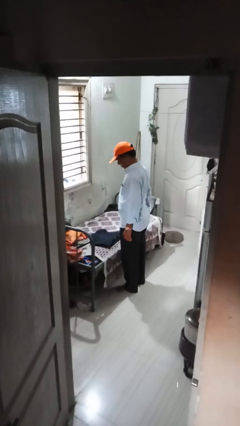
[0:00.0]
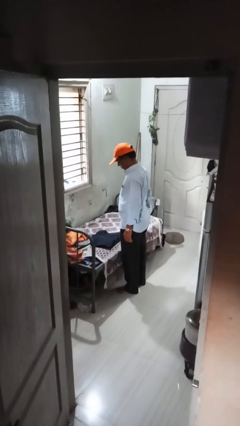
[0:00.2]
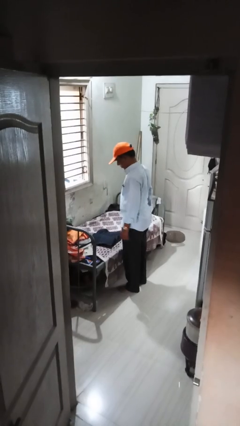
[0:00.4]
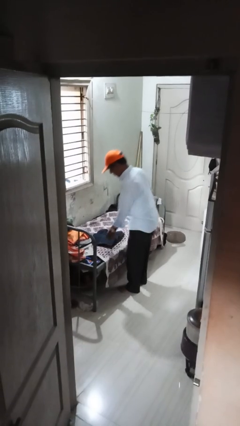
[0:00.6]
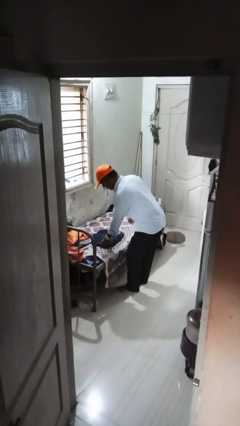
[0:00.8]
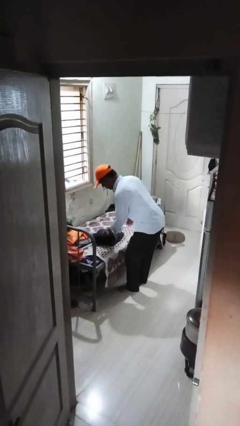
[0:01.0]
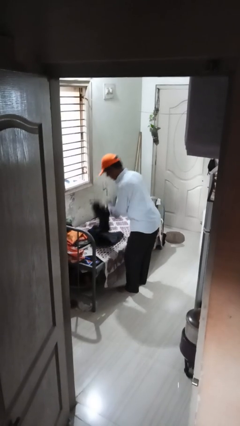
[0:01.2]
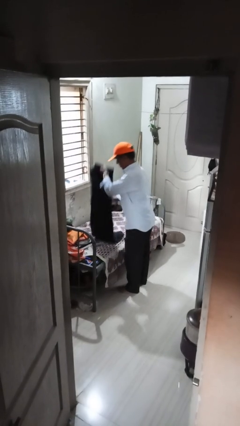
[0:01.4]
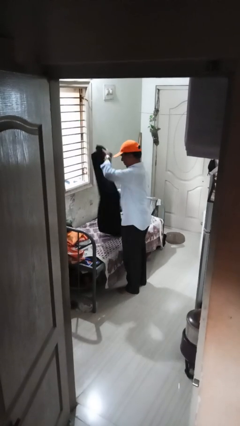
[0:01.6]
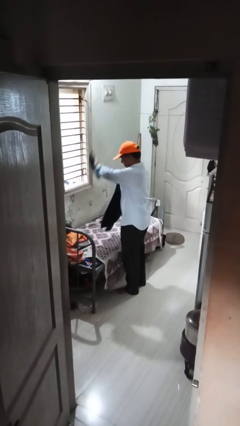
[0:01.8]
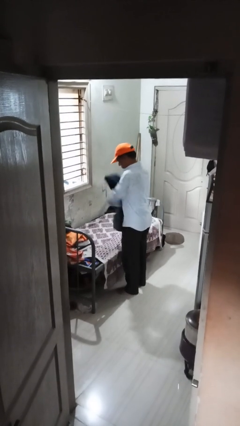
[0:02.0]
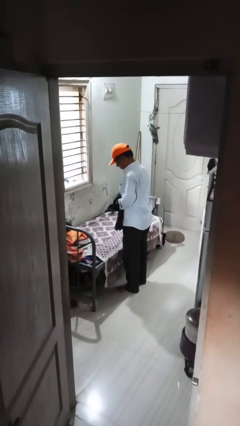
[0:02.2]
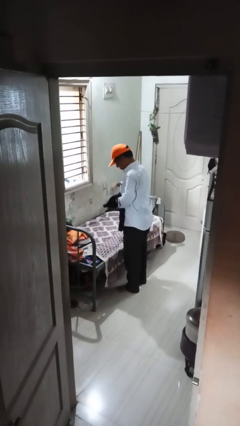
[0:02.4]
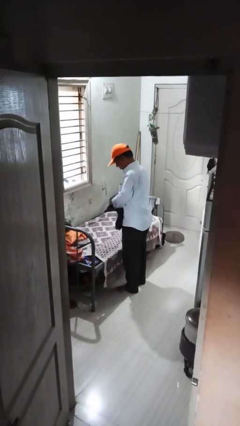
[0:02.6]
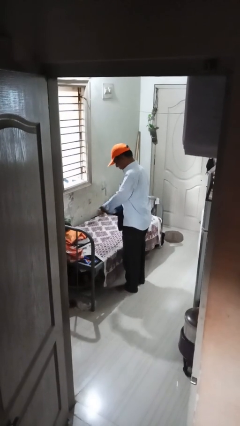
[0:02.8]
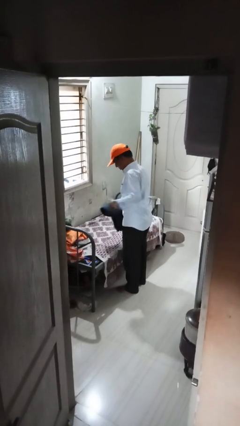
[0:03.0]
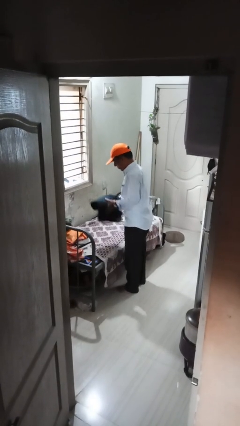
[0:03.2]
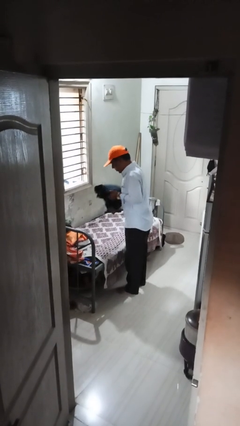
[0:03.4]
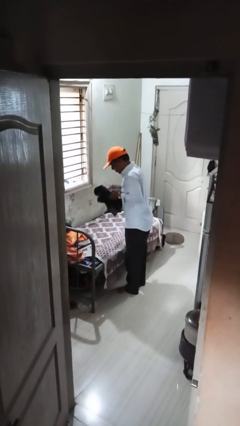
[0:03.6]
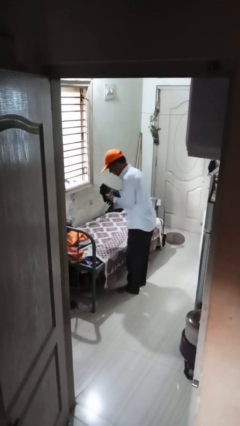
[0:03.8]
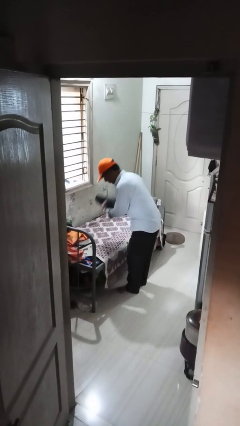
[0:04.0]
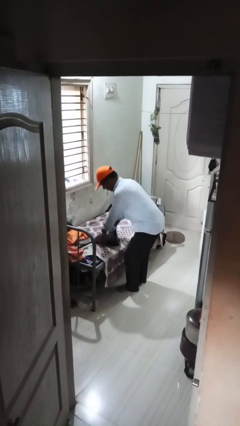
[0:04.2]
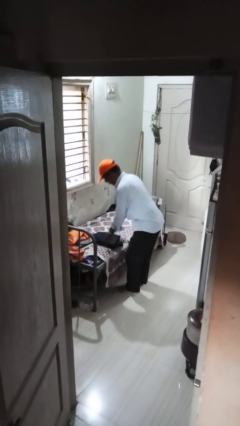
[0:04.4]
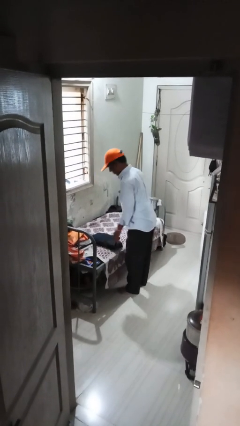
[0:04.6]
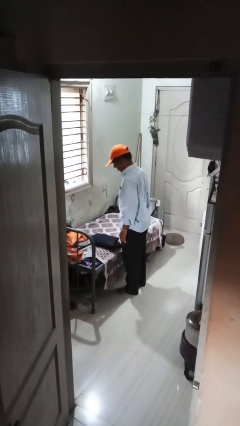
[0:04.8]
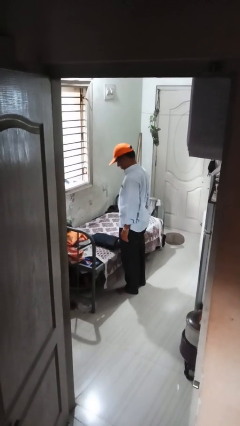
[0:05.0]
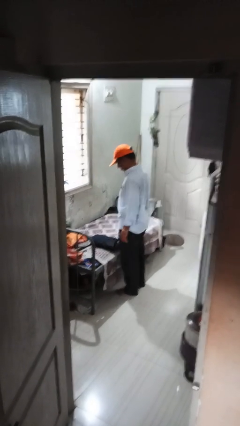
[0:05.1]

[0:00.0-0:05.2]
person folds pants

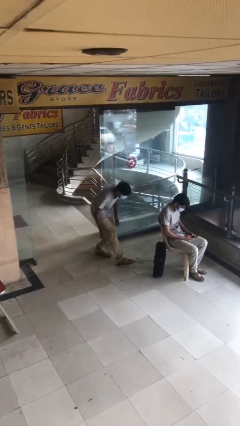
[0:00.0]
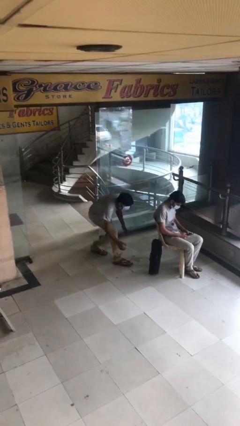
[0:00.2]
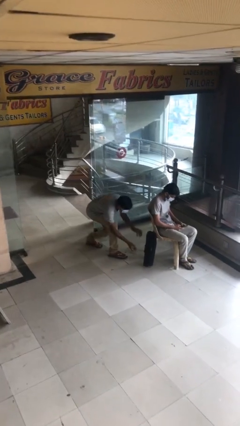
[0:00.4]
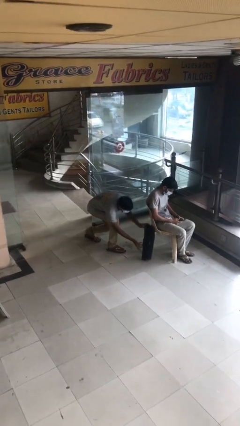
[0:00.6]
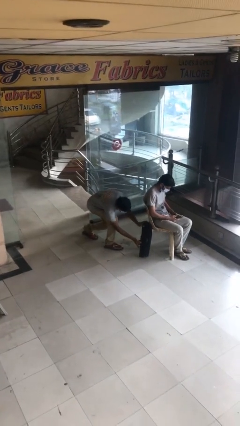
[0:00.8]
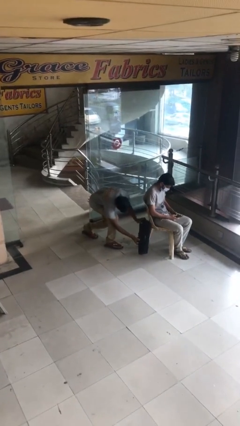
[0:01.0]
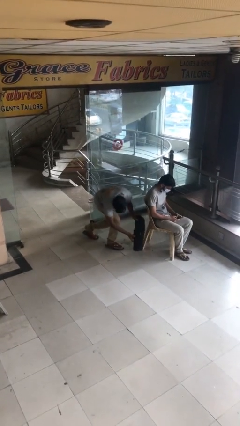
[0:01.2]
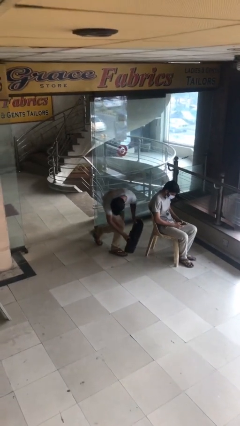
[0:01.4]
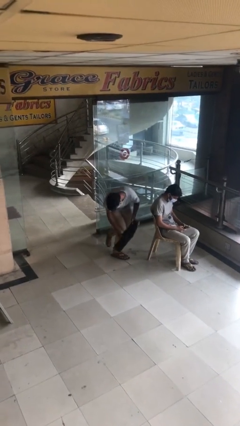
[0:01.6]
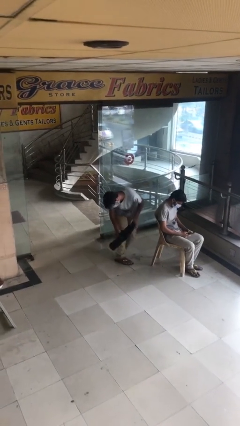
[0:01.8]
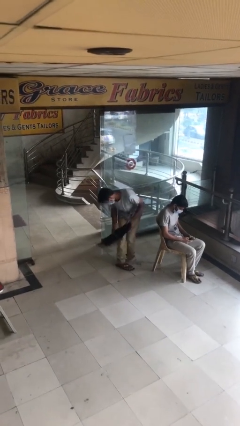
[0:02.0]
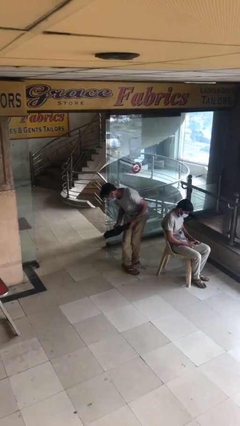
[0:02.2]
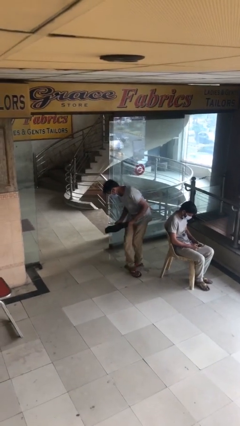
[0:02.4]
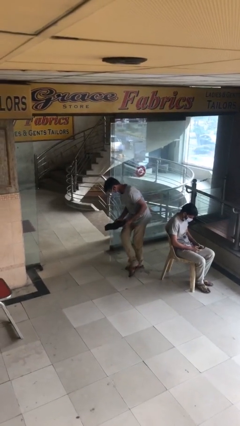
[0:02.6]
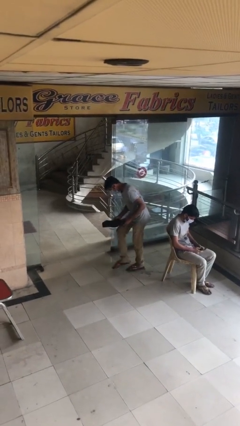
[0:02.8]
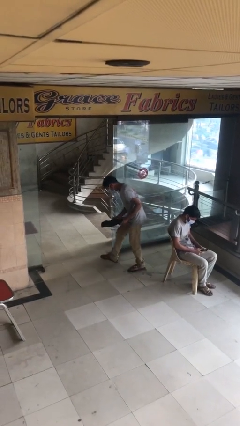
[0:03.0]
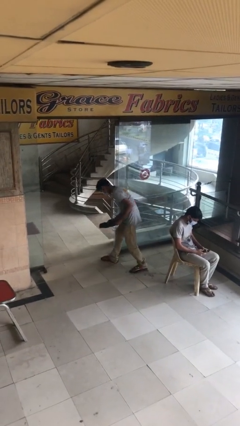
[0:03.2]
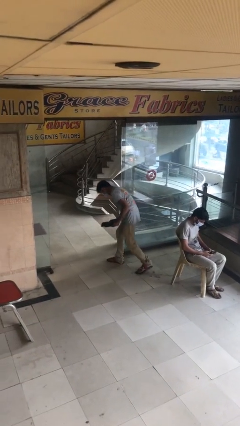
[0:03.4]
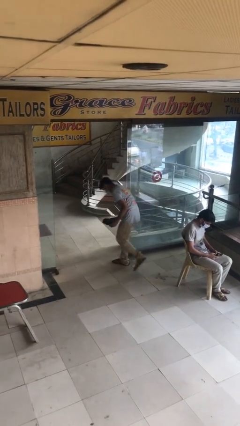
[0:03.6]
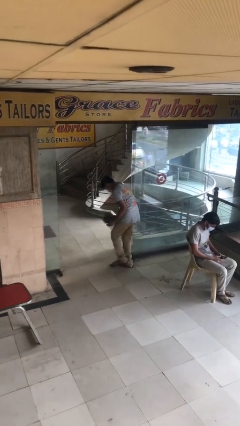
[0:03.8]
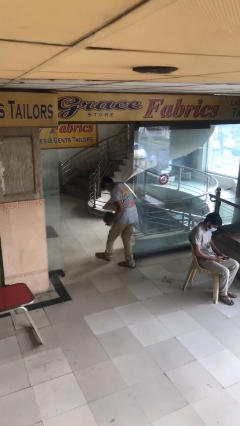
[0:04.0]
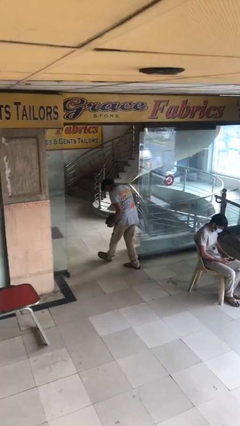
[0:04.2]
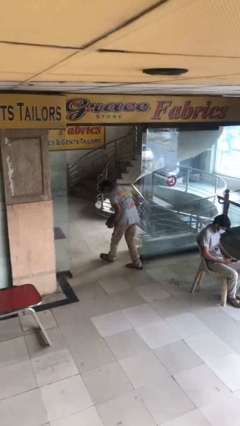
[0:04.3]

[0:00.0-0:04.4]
person steals object from person

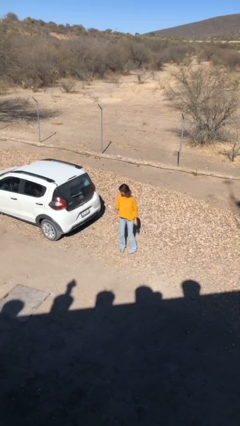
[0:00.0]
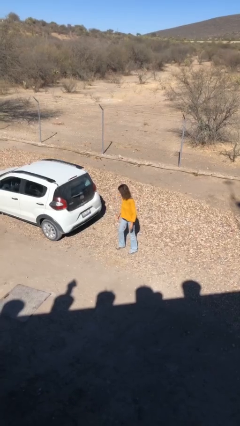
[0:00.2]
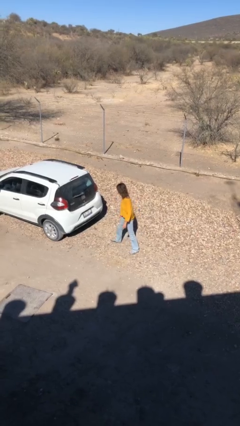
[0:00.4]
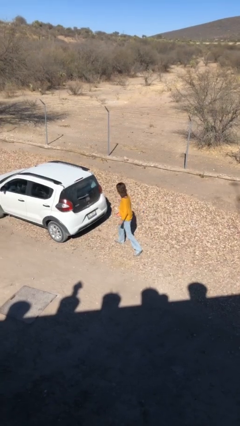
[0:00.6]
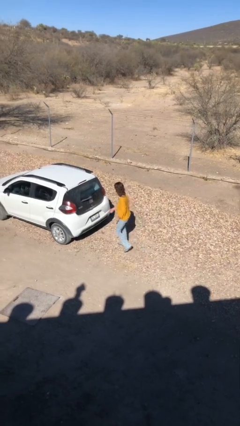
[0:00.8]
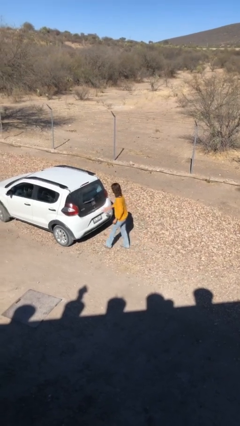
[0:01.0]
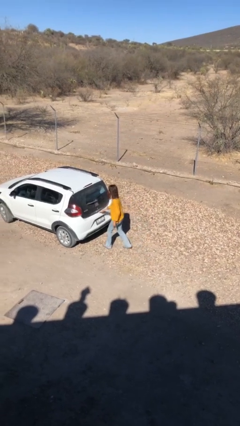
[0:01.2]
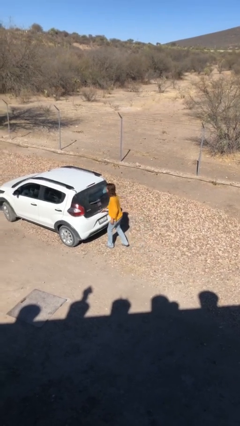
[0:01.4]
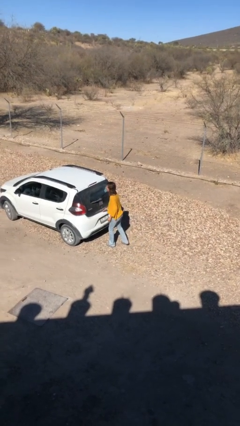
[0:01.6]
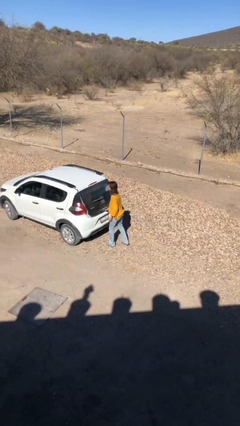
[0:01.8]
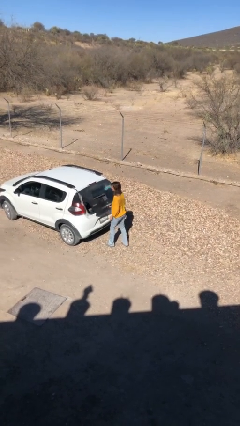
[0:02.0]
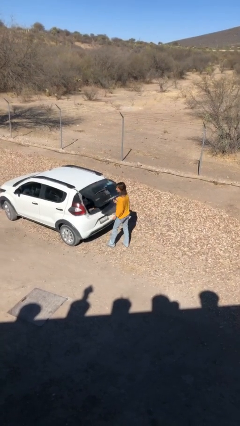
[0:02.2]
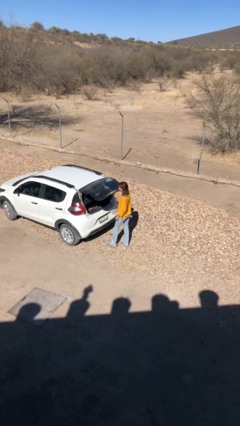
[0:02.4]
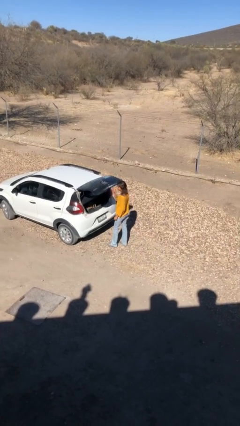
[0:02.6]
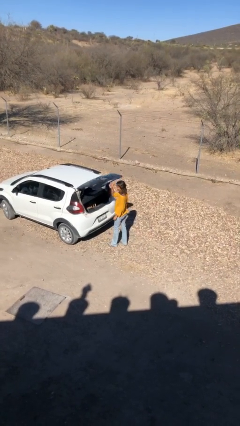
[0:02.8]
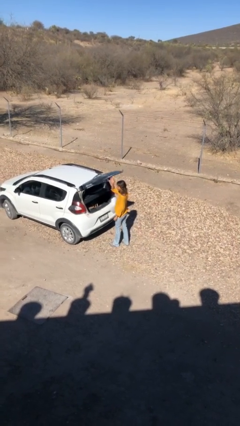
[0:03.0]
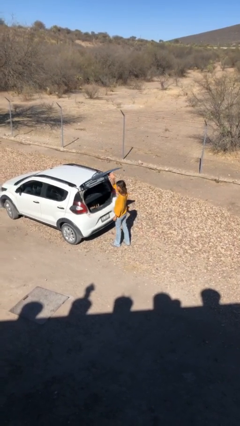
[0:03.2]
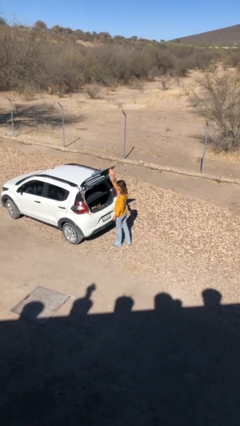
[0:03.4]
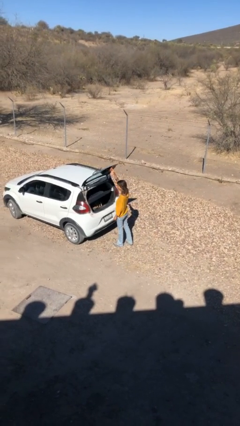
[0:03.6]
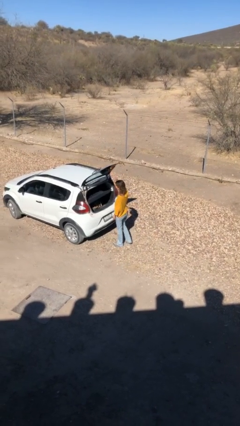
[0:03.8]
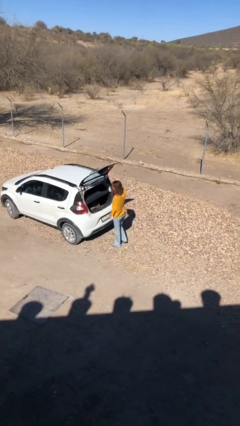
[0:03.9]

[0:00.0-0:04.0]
person opens car trunk

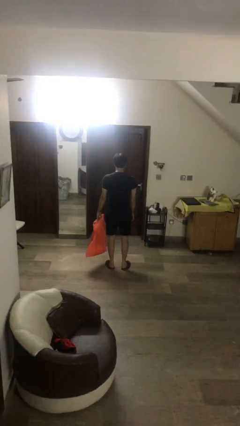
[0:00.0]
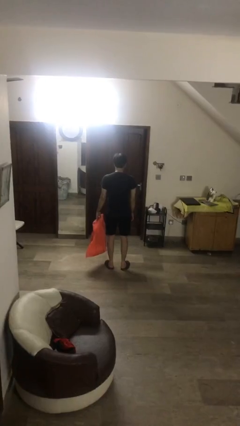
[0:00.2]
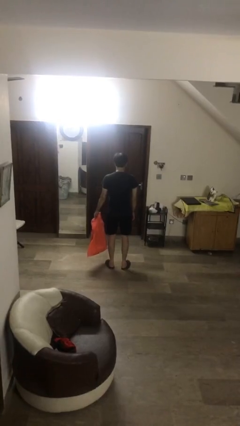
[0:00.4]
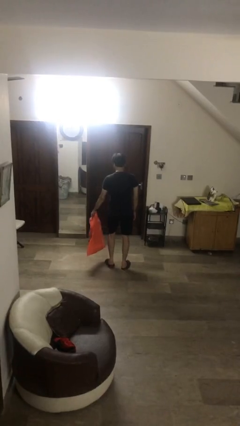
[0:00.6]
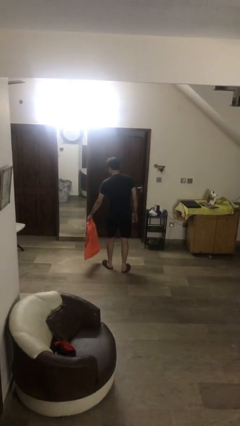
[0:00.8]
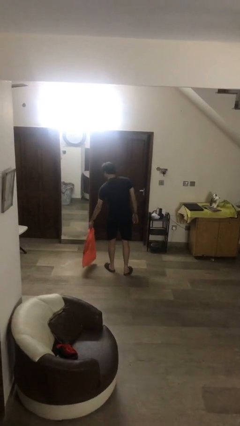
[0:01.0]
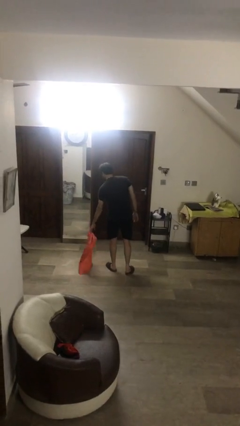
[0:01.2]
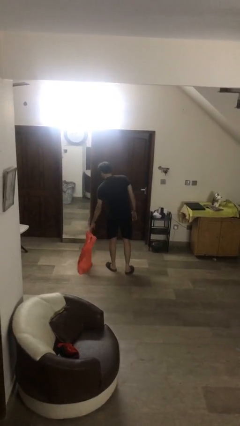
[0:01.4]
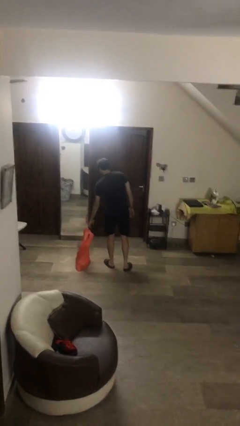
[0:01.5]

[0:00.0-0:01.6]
person puts down object on floor

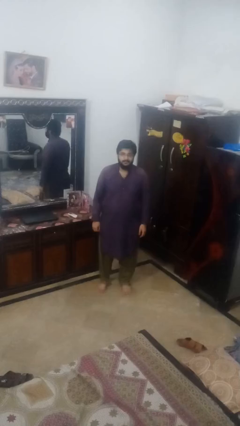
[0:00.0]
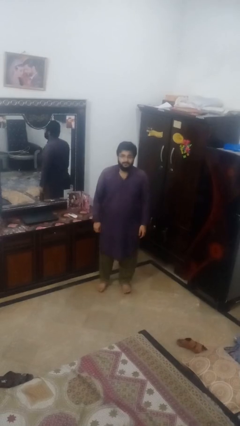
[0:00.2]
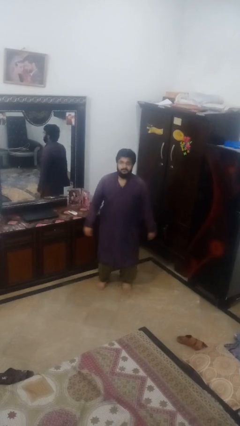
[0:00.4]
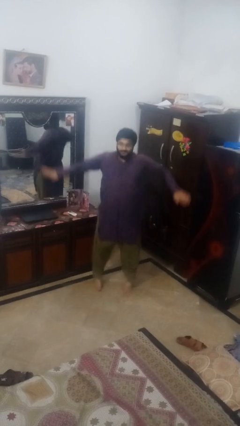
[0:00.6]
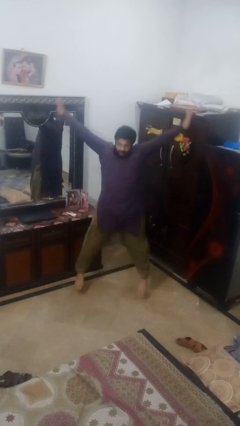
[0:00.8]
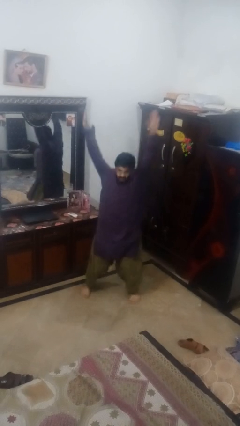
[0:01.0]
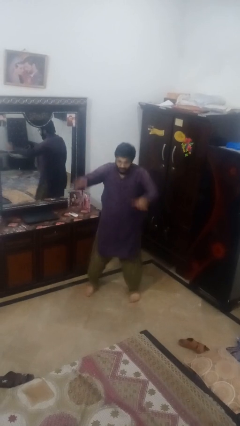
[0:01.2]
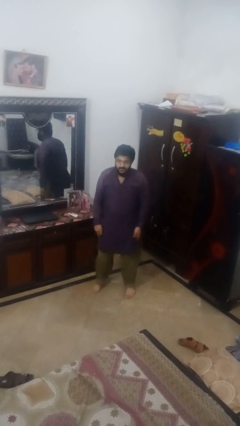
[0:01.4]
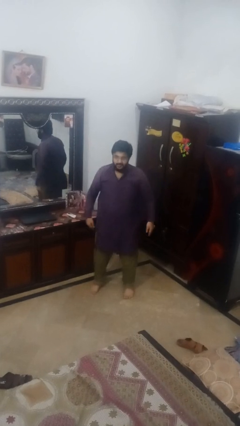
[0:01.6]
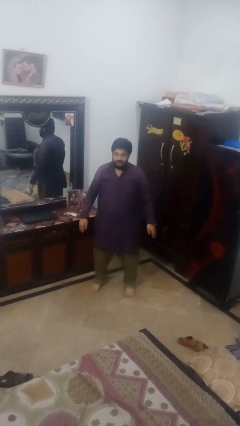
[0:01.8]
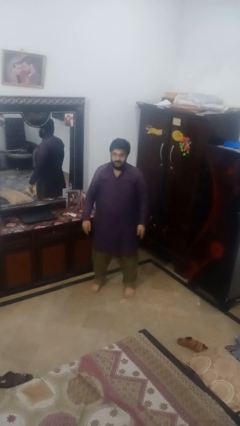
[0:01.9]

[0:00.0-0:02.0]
person exercises with jumping jacks

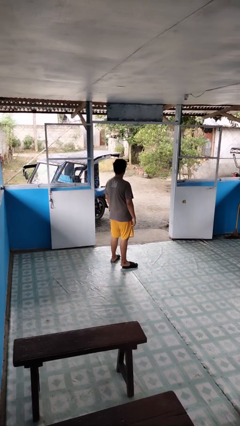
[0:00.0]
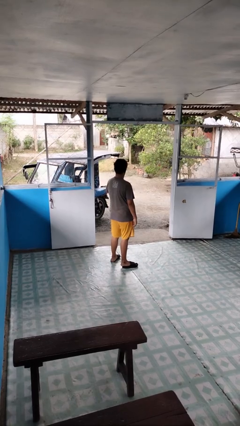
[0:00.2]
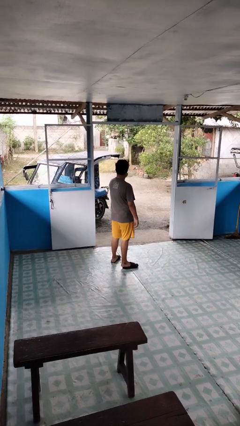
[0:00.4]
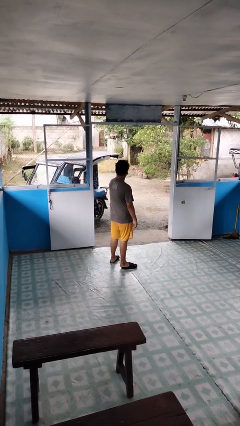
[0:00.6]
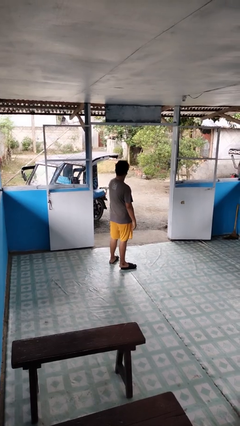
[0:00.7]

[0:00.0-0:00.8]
person gestures watch closely
